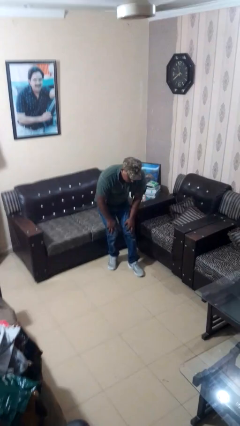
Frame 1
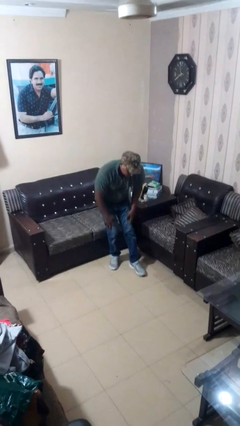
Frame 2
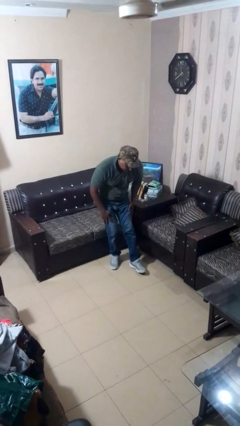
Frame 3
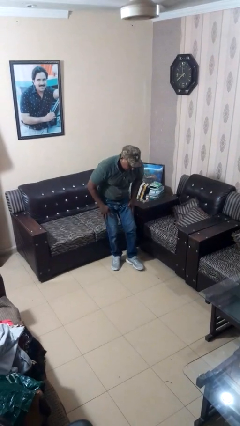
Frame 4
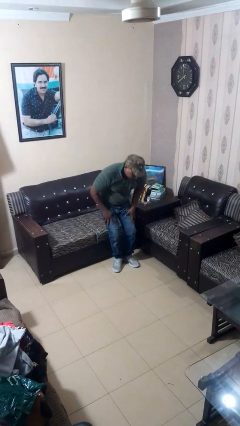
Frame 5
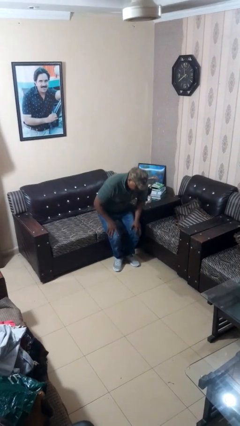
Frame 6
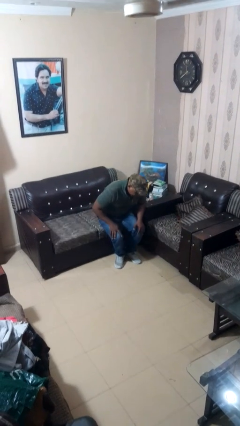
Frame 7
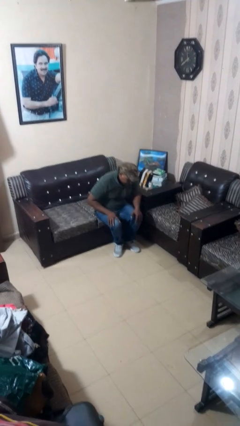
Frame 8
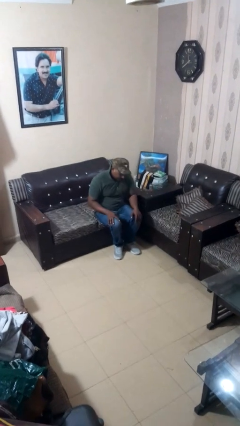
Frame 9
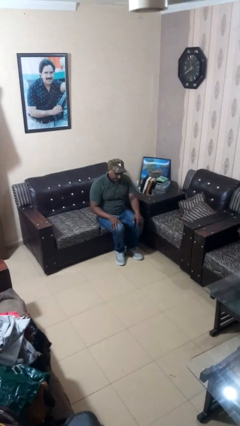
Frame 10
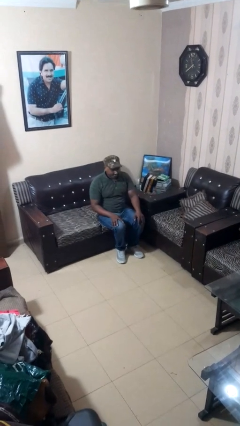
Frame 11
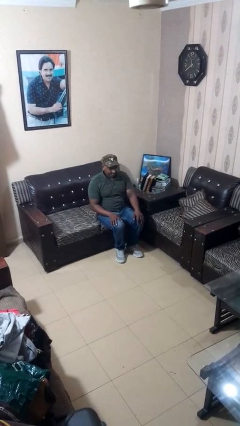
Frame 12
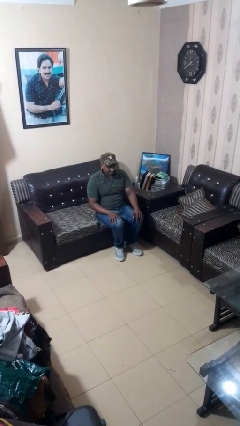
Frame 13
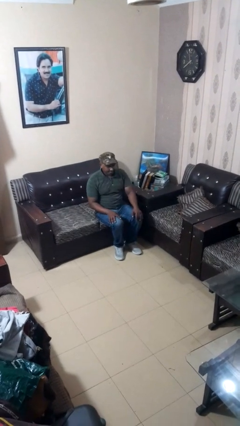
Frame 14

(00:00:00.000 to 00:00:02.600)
person sits down

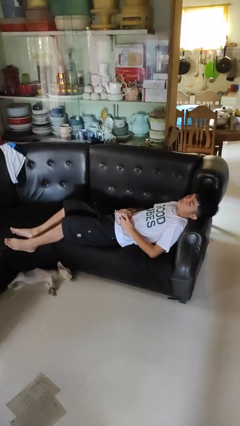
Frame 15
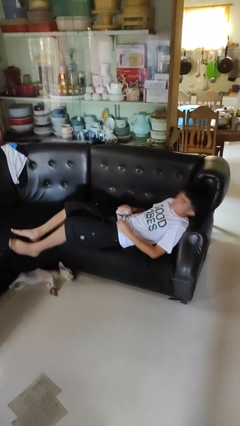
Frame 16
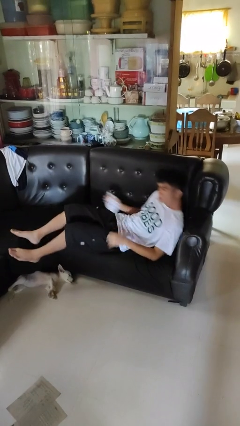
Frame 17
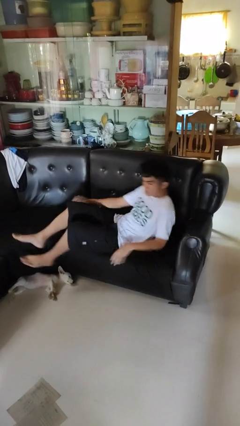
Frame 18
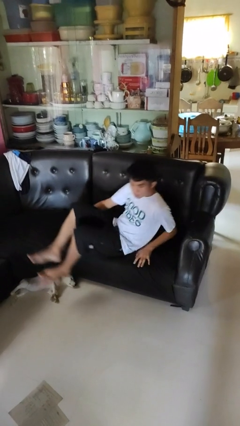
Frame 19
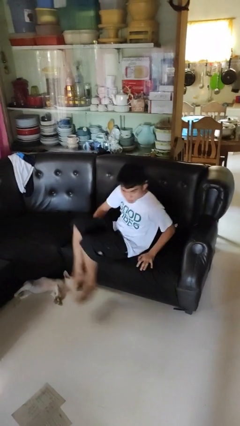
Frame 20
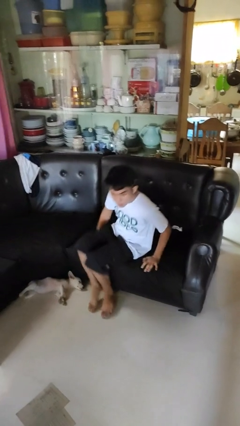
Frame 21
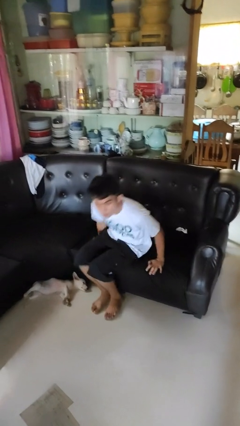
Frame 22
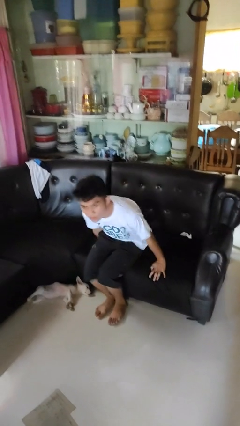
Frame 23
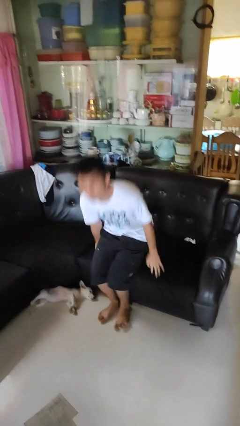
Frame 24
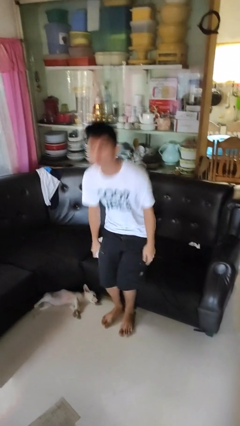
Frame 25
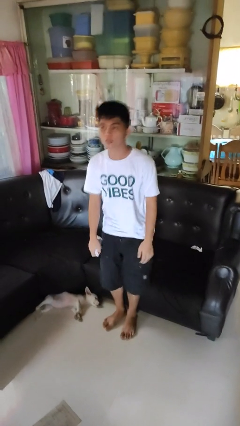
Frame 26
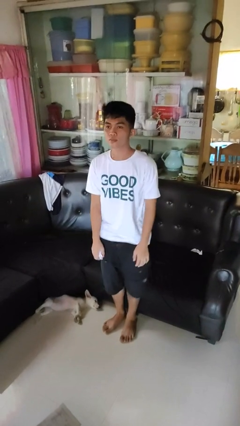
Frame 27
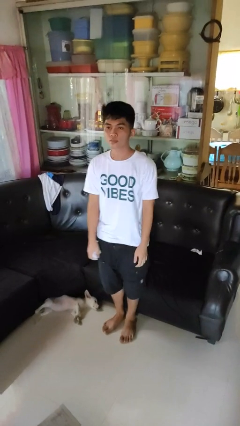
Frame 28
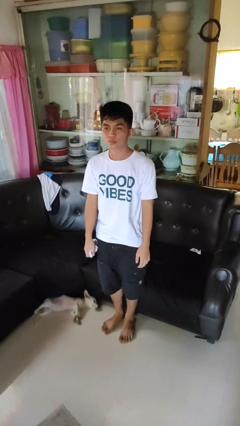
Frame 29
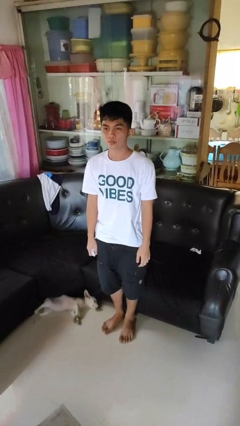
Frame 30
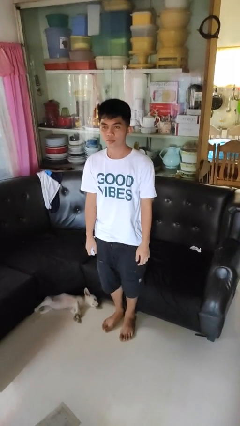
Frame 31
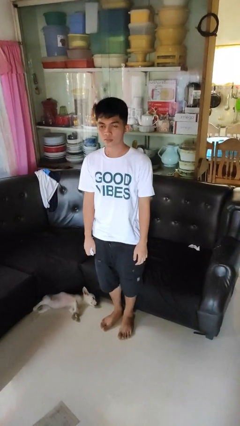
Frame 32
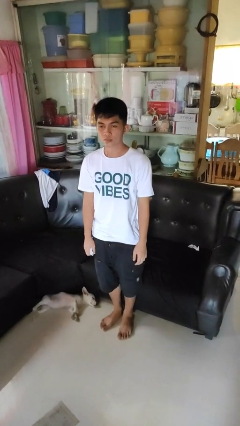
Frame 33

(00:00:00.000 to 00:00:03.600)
person stands up

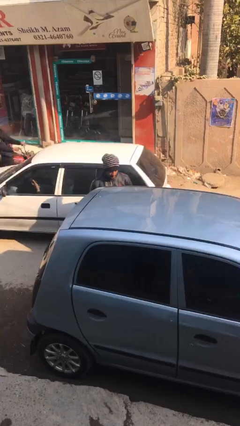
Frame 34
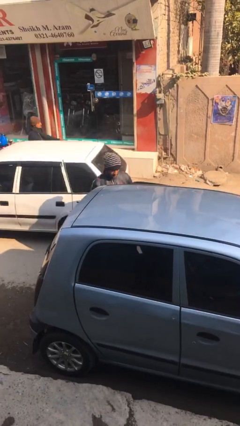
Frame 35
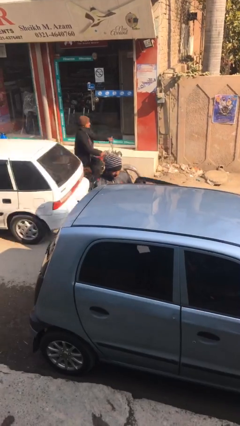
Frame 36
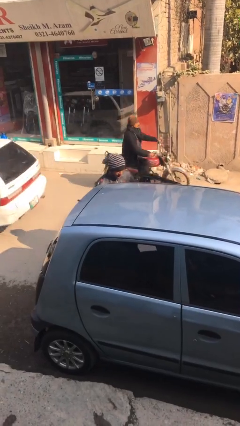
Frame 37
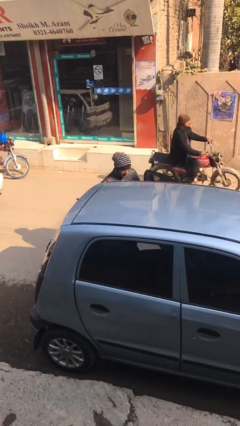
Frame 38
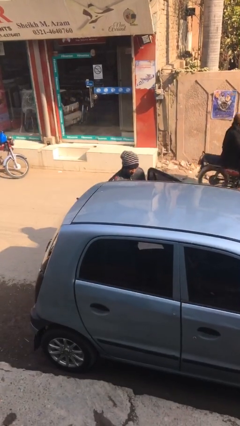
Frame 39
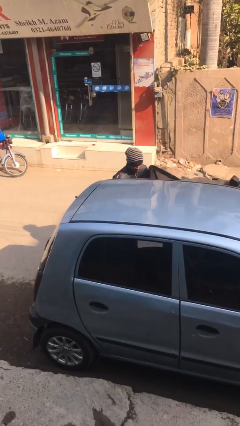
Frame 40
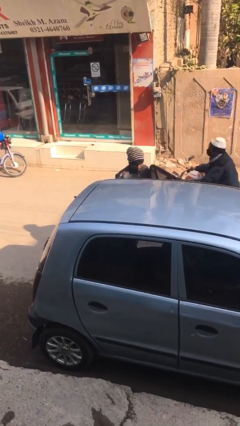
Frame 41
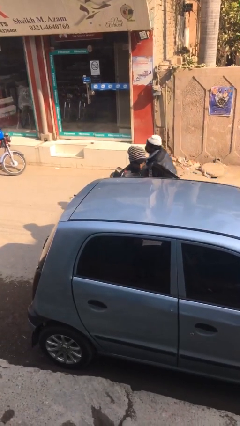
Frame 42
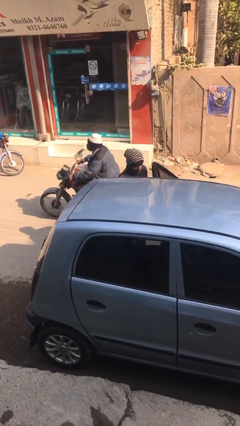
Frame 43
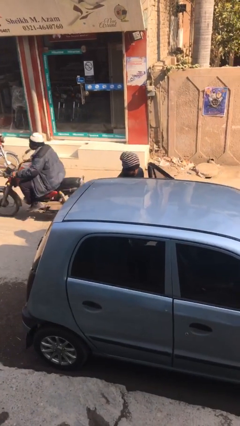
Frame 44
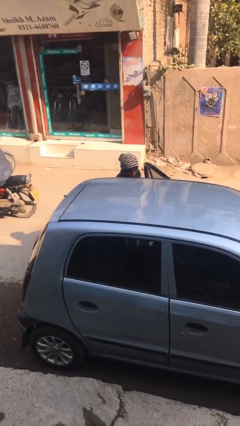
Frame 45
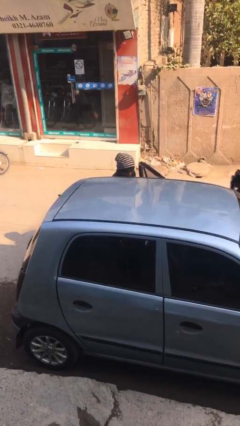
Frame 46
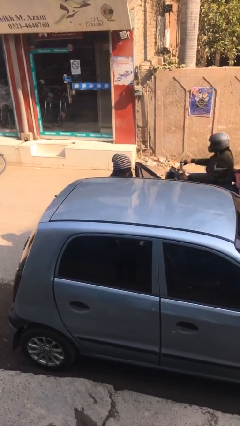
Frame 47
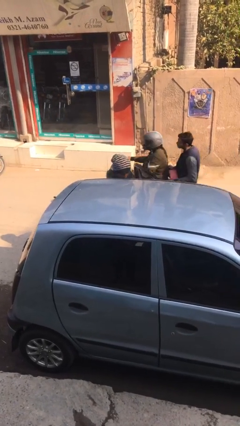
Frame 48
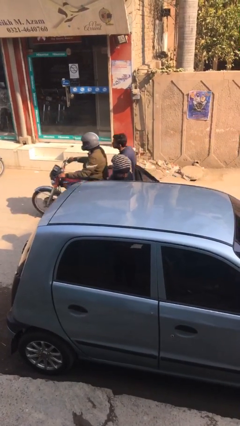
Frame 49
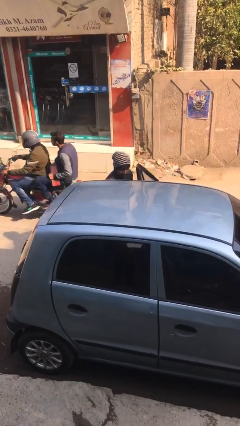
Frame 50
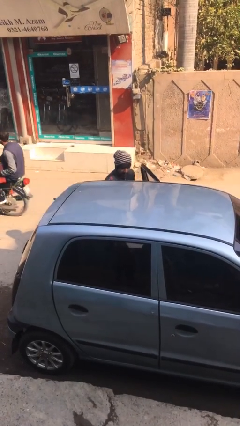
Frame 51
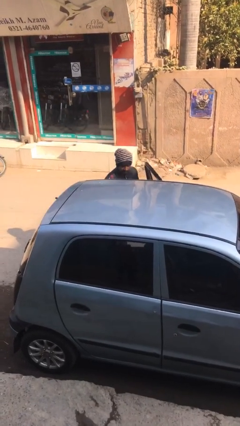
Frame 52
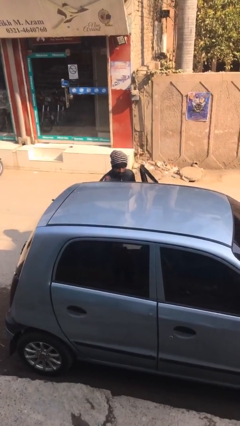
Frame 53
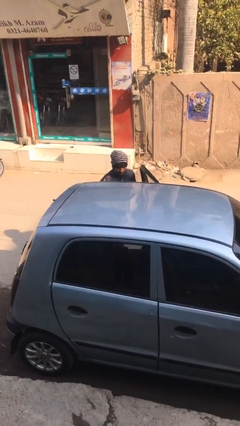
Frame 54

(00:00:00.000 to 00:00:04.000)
person loads car

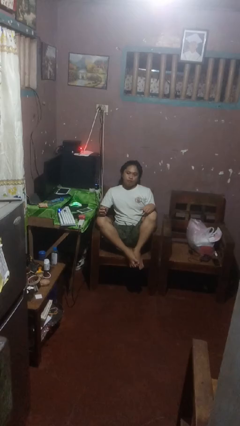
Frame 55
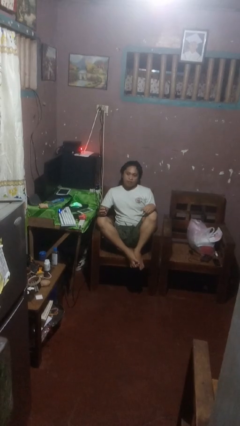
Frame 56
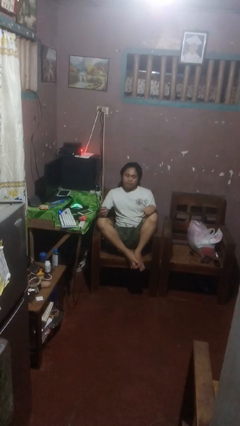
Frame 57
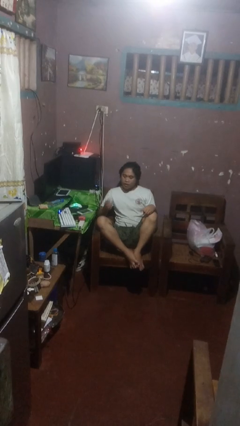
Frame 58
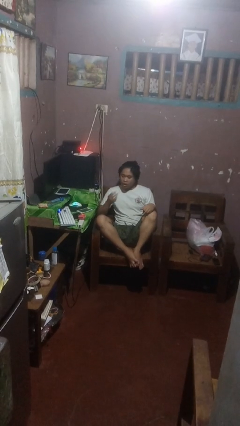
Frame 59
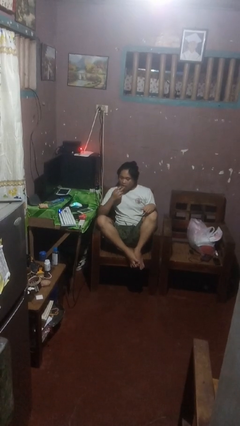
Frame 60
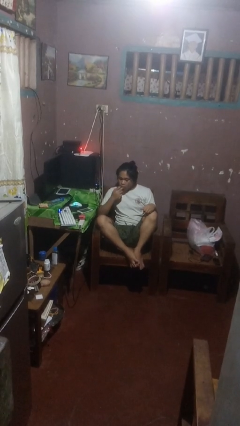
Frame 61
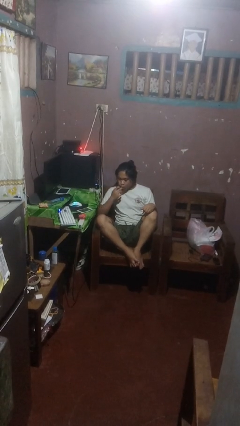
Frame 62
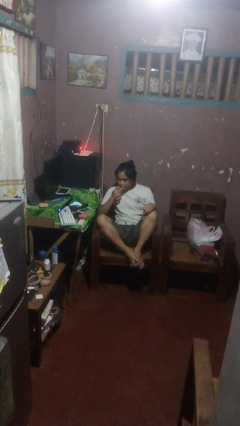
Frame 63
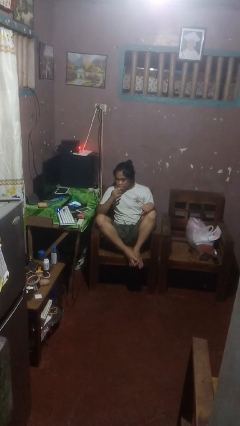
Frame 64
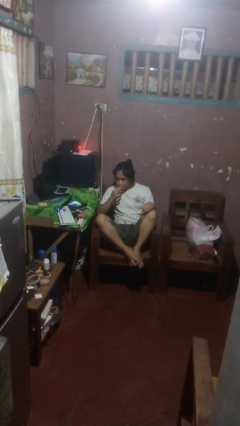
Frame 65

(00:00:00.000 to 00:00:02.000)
person licks fingers

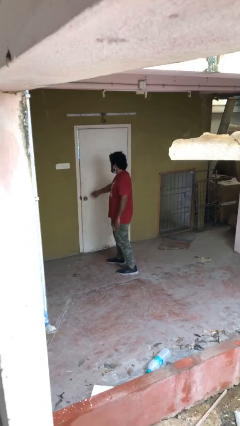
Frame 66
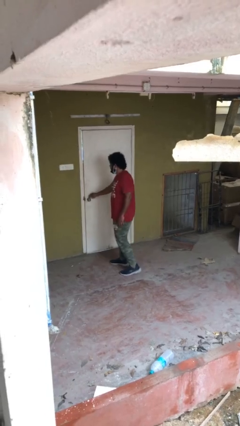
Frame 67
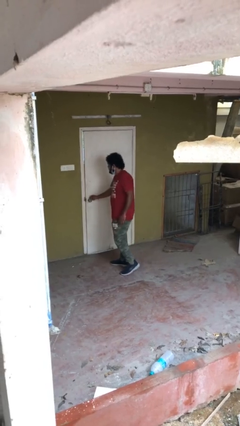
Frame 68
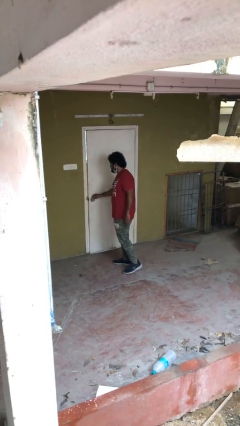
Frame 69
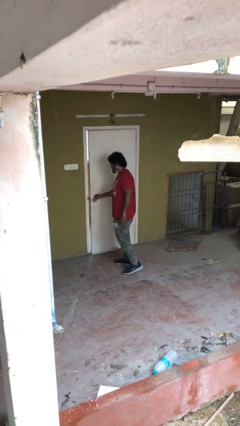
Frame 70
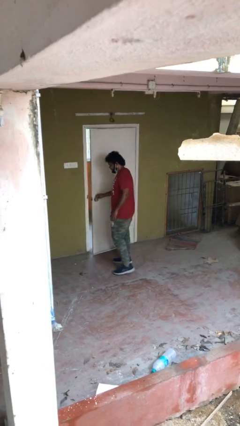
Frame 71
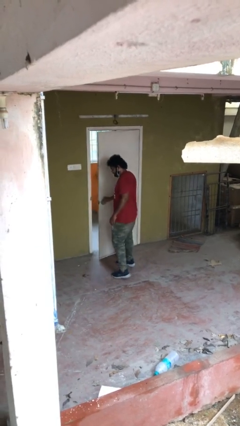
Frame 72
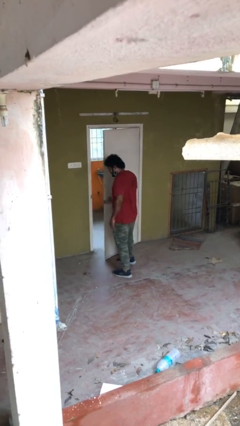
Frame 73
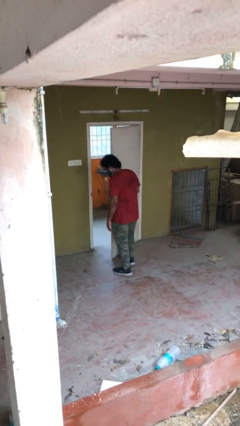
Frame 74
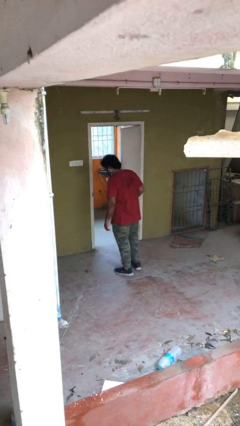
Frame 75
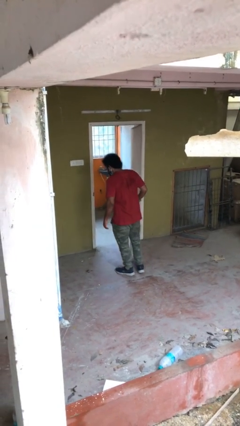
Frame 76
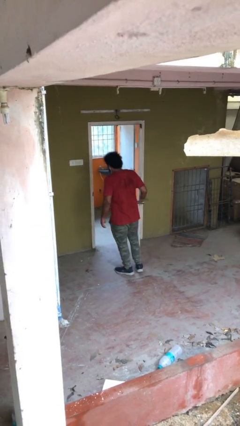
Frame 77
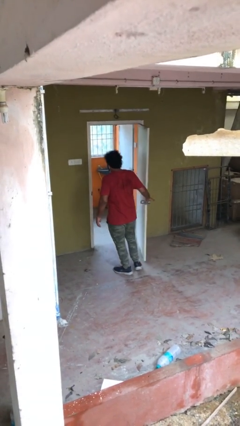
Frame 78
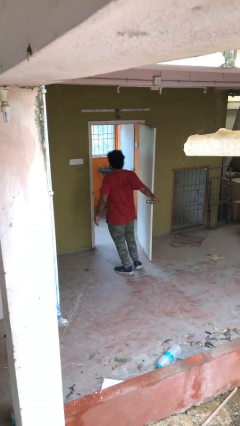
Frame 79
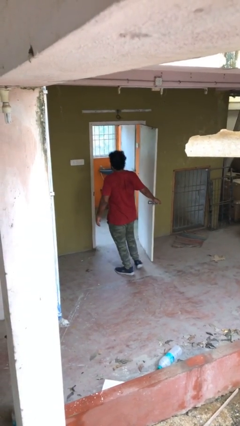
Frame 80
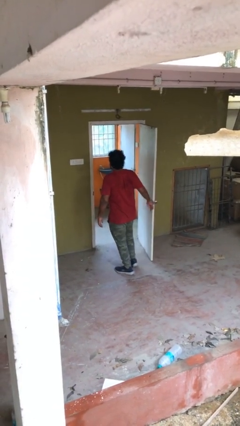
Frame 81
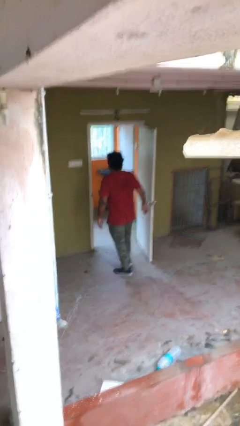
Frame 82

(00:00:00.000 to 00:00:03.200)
person opens facility door

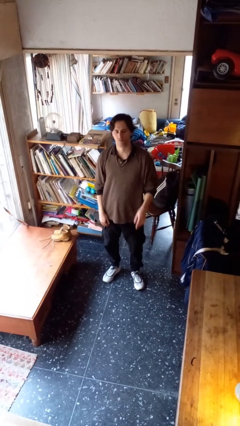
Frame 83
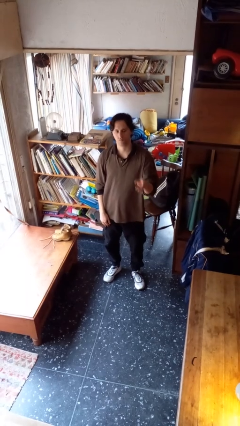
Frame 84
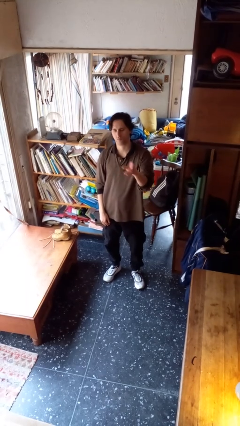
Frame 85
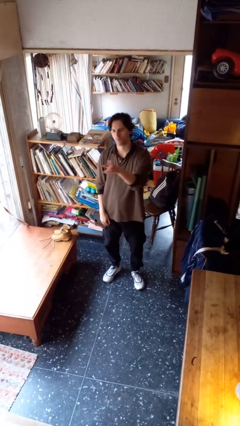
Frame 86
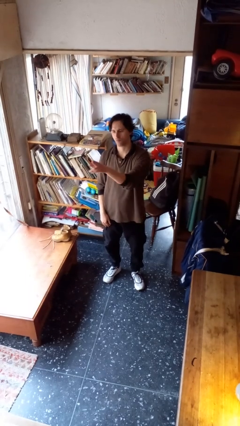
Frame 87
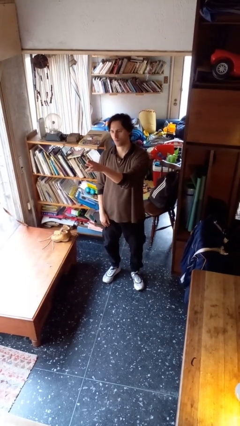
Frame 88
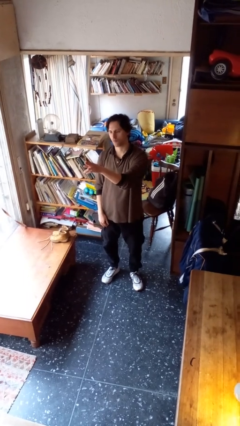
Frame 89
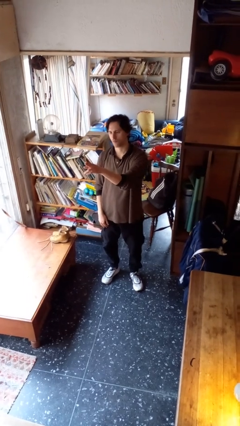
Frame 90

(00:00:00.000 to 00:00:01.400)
person gestures swipe right

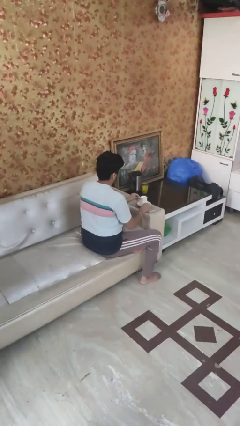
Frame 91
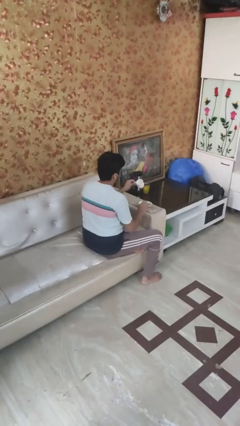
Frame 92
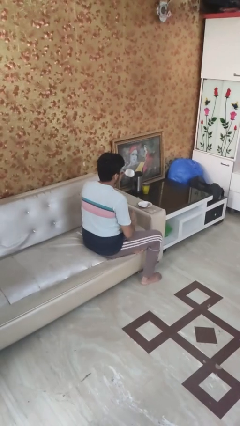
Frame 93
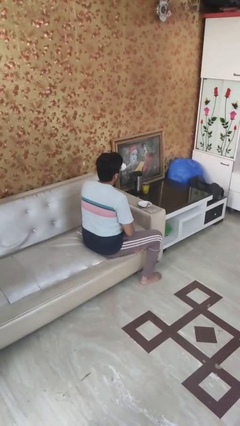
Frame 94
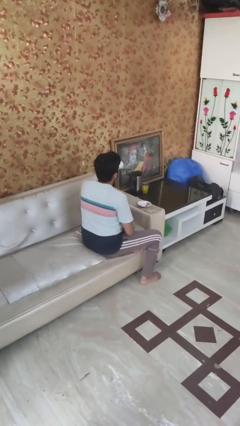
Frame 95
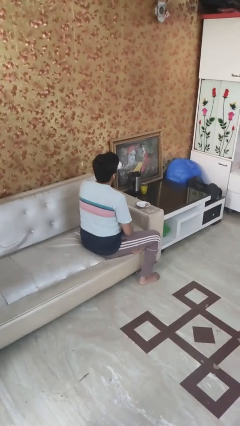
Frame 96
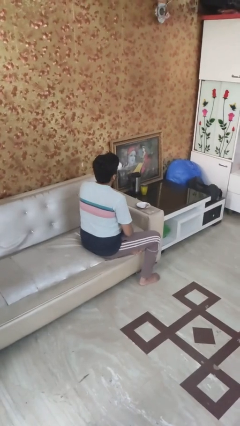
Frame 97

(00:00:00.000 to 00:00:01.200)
person drinks from mug
